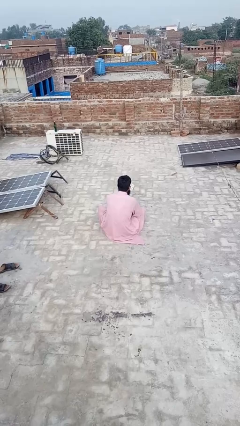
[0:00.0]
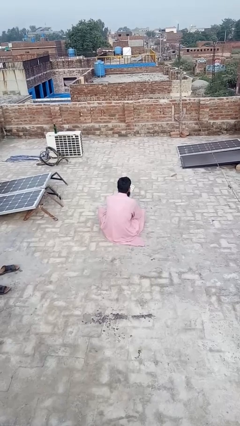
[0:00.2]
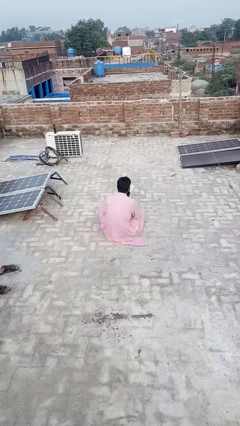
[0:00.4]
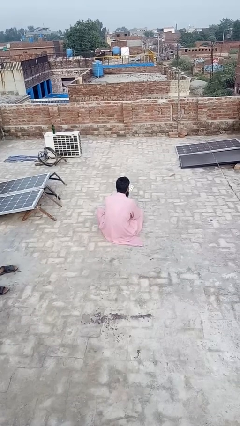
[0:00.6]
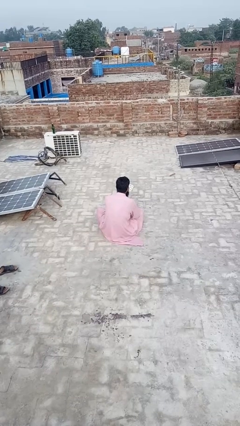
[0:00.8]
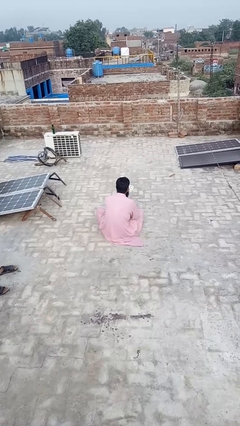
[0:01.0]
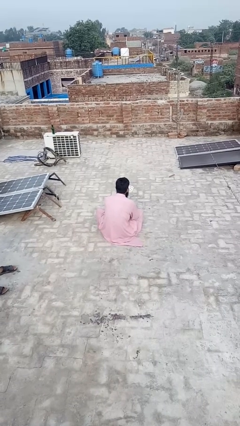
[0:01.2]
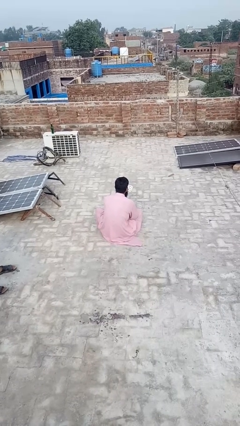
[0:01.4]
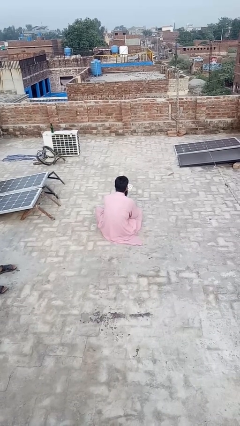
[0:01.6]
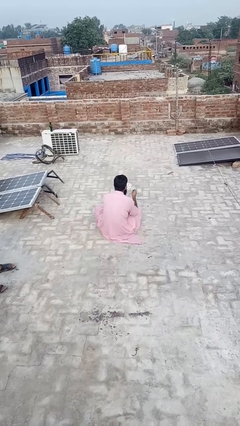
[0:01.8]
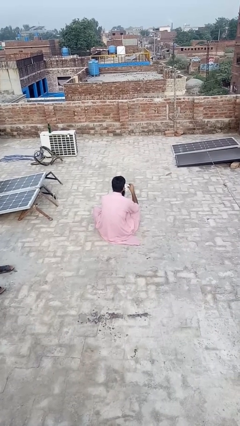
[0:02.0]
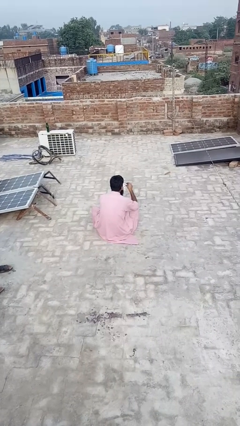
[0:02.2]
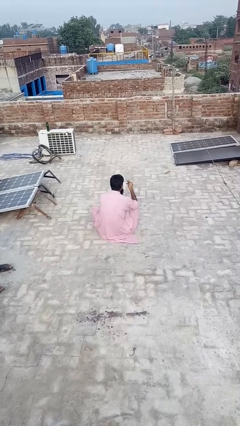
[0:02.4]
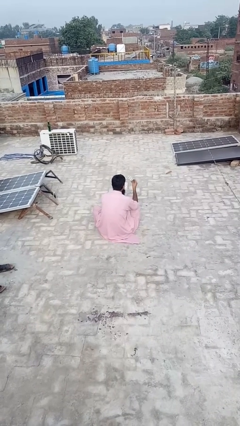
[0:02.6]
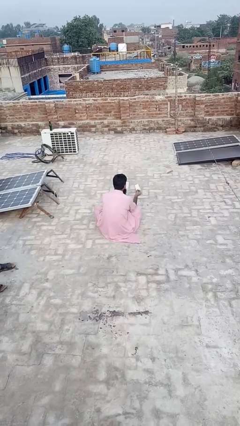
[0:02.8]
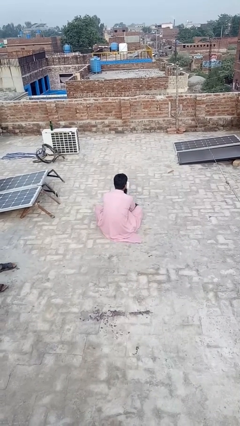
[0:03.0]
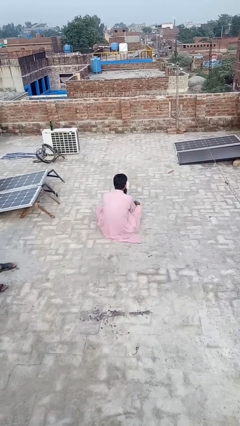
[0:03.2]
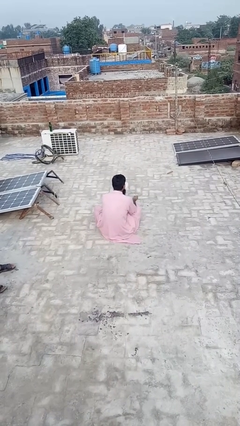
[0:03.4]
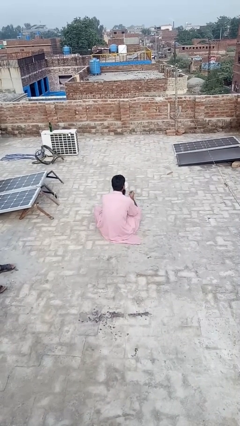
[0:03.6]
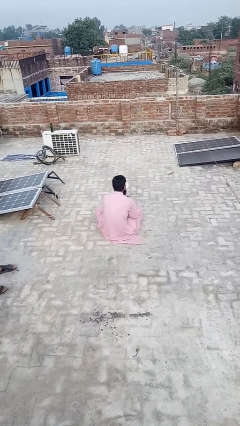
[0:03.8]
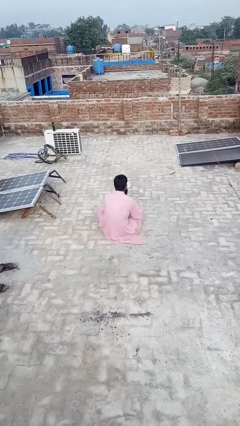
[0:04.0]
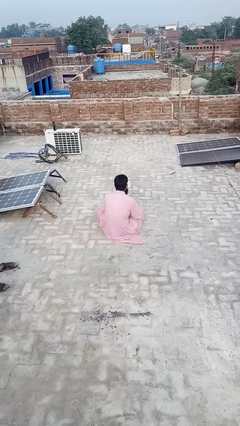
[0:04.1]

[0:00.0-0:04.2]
person discards trash

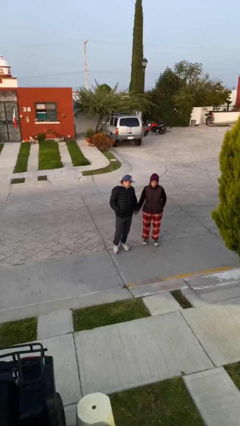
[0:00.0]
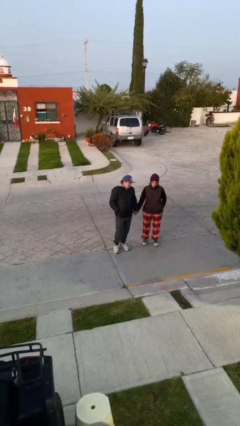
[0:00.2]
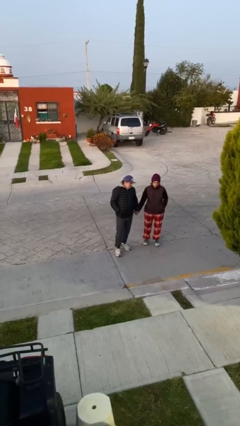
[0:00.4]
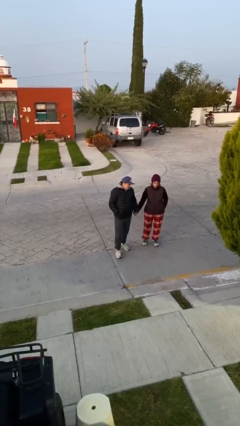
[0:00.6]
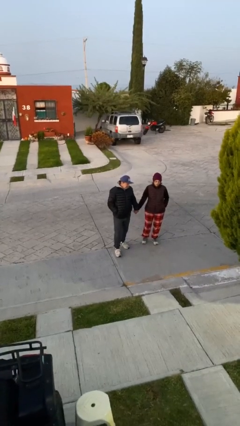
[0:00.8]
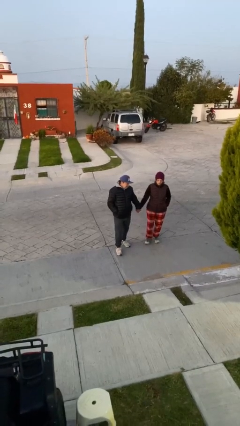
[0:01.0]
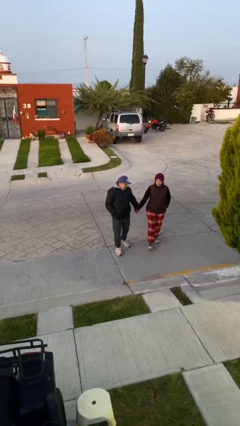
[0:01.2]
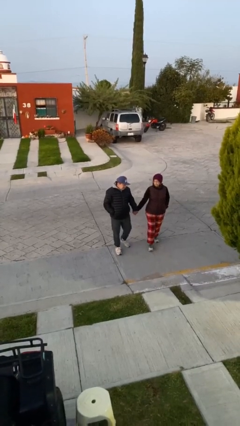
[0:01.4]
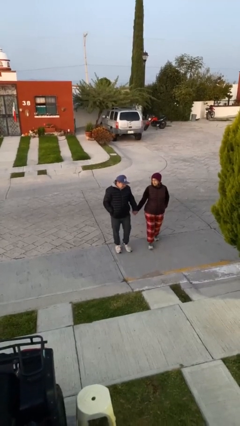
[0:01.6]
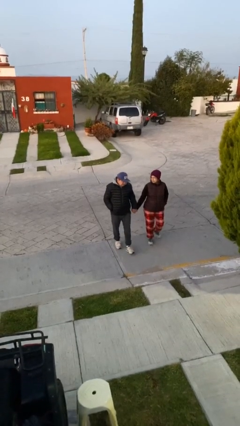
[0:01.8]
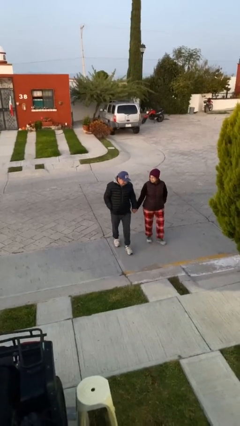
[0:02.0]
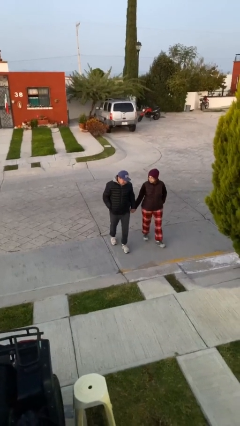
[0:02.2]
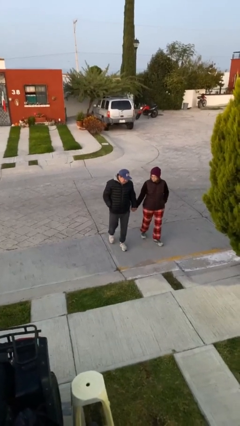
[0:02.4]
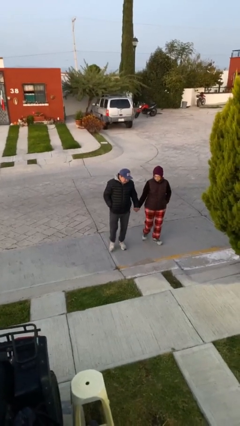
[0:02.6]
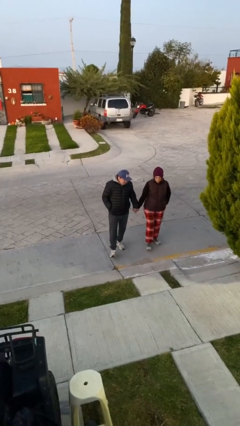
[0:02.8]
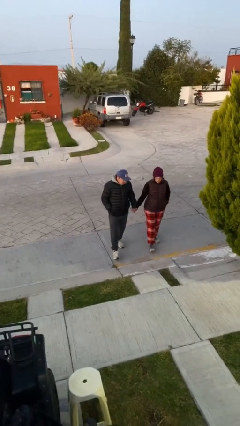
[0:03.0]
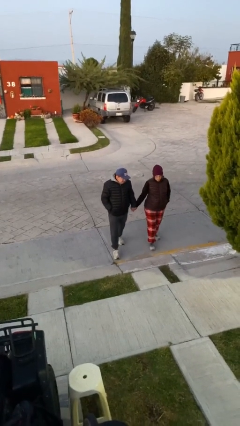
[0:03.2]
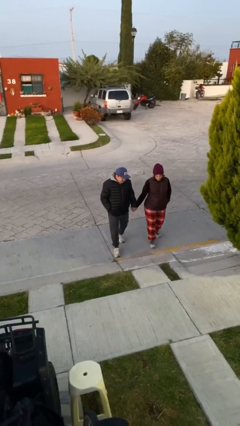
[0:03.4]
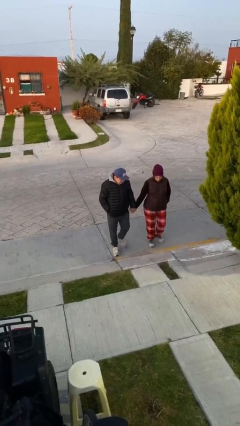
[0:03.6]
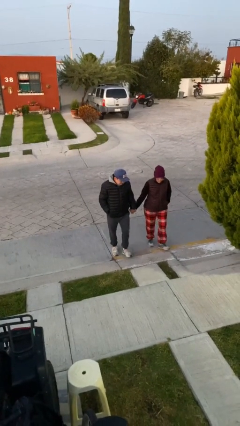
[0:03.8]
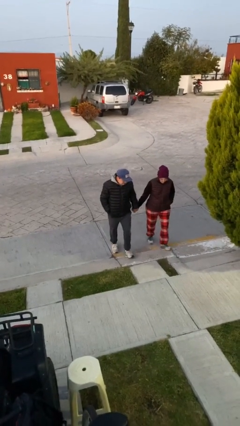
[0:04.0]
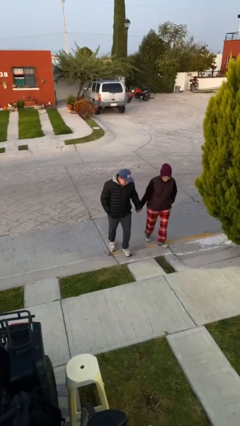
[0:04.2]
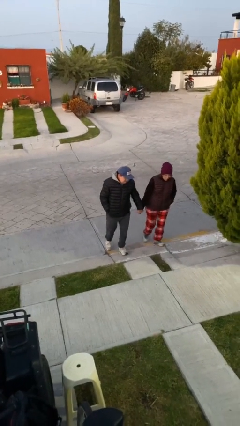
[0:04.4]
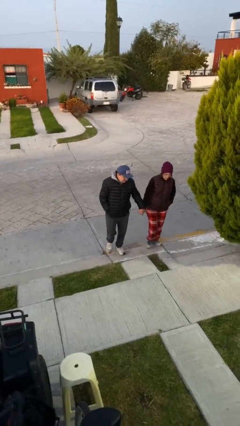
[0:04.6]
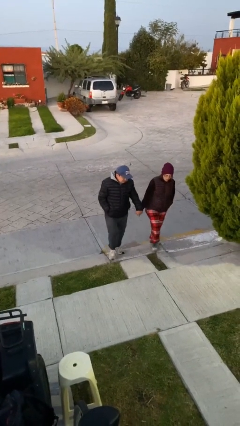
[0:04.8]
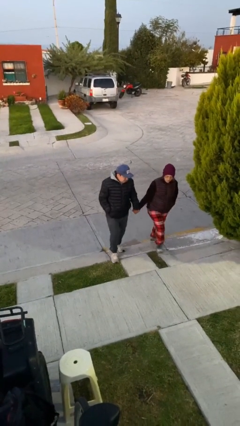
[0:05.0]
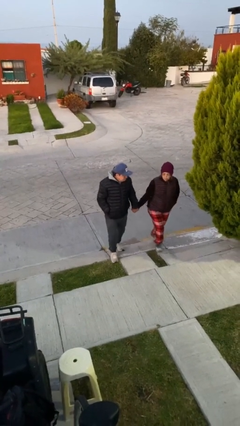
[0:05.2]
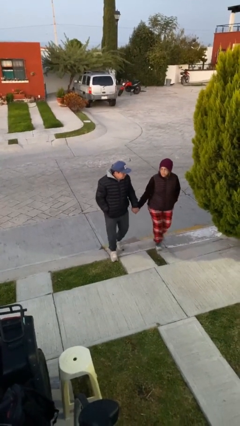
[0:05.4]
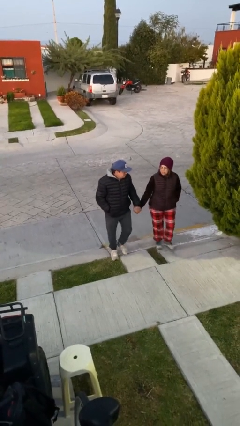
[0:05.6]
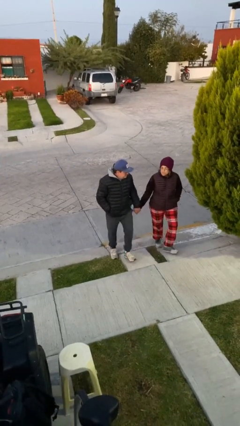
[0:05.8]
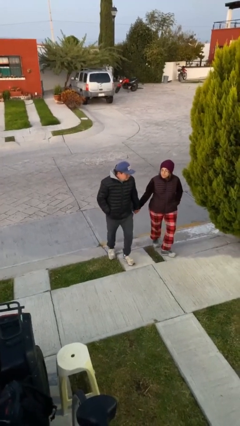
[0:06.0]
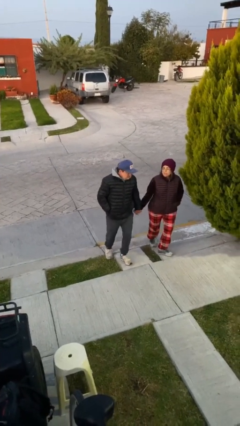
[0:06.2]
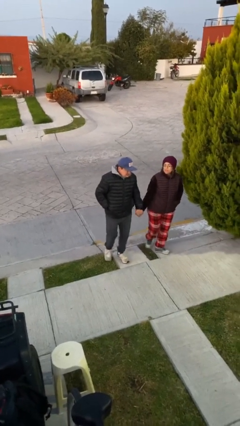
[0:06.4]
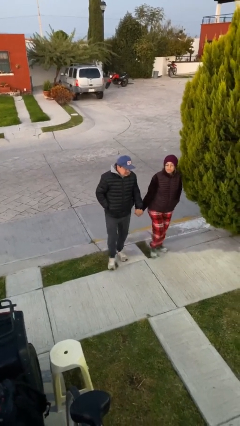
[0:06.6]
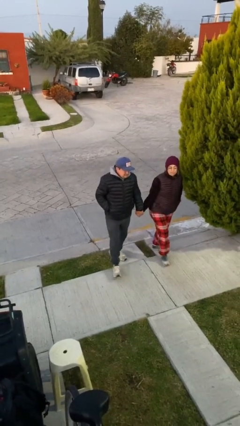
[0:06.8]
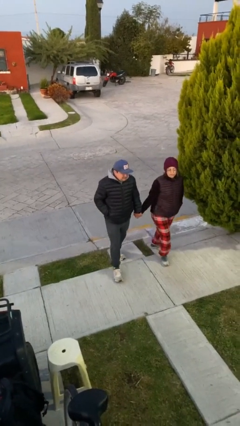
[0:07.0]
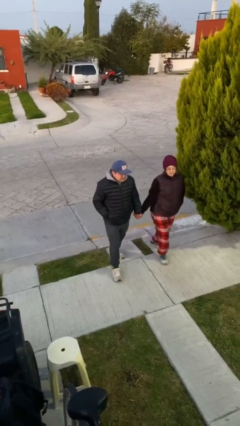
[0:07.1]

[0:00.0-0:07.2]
person holds hand

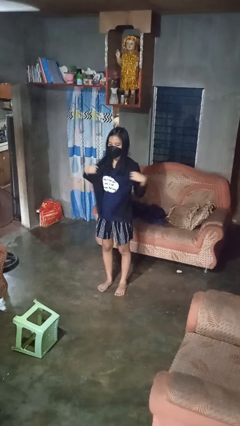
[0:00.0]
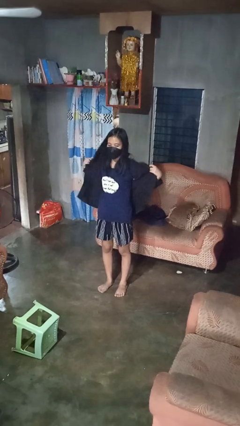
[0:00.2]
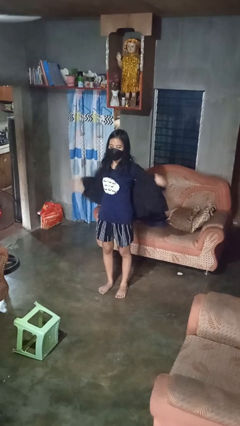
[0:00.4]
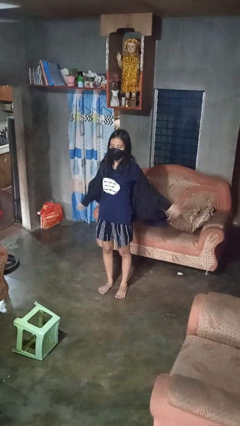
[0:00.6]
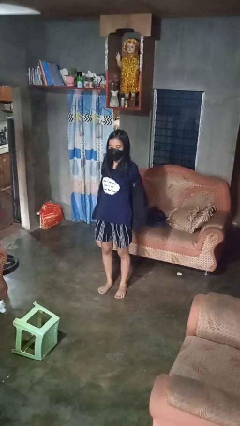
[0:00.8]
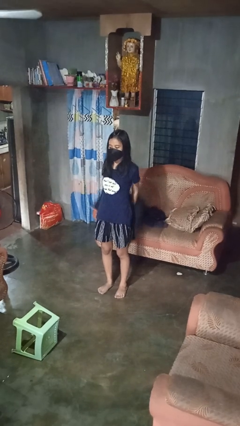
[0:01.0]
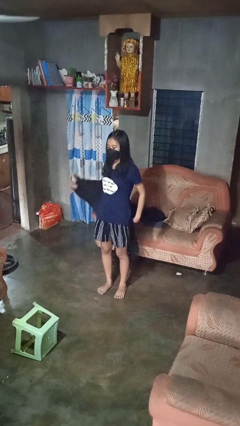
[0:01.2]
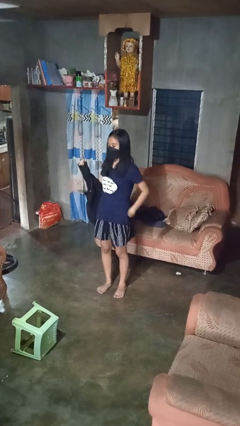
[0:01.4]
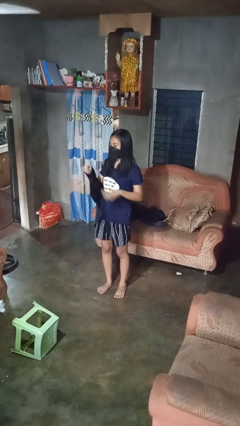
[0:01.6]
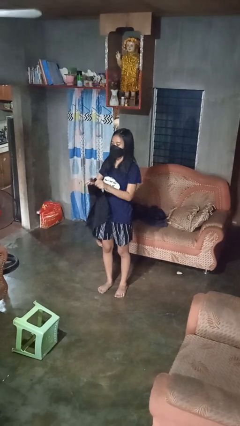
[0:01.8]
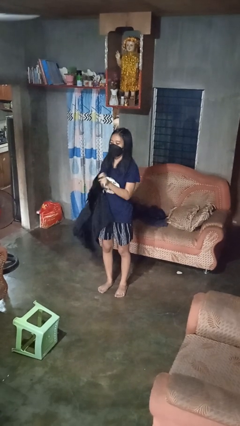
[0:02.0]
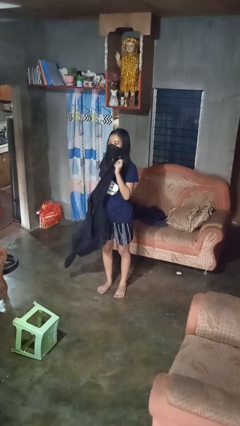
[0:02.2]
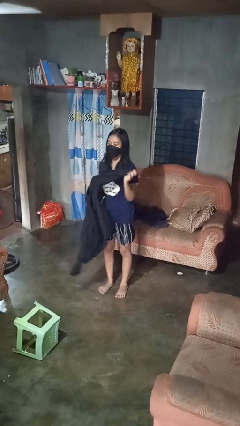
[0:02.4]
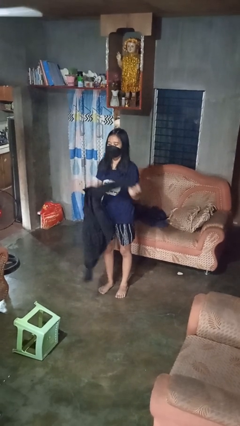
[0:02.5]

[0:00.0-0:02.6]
person takes off shirt

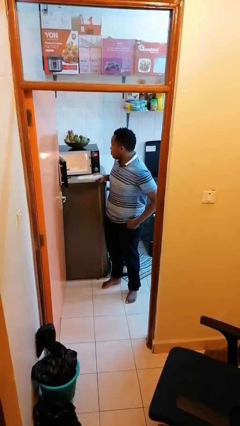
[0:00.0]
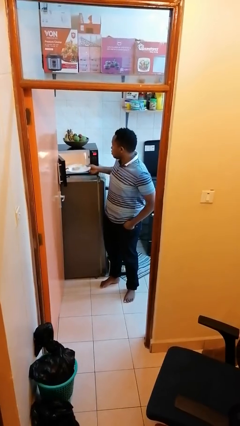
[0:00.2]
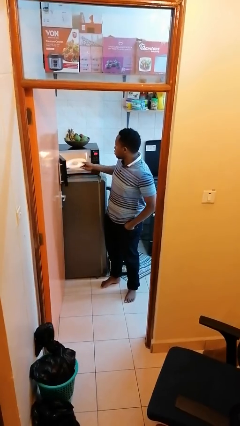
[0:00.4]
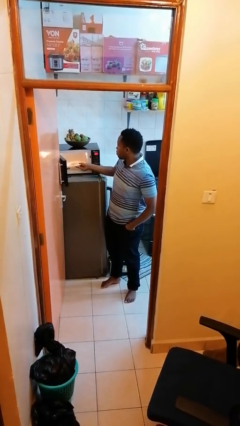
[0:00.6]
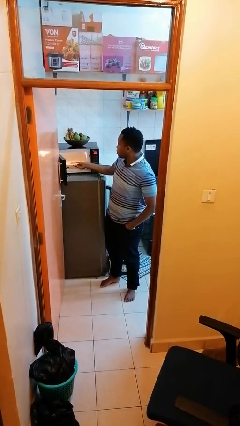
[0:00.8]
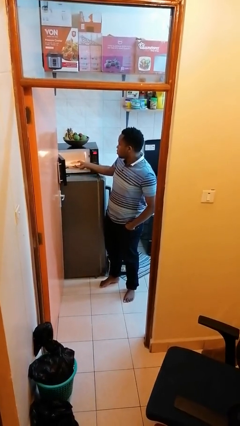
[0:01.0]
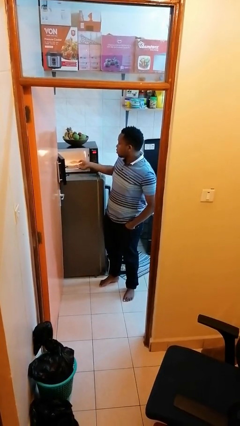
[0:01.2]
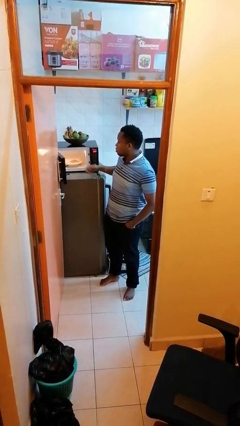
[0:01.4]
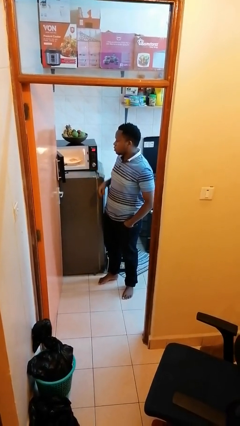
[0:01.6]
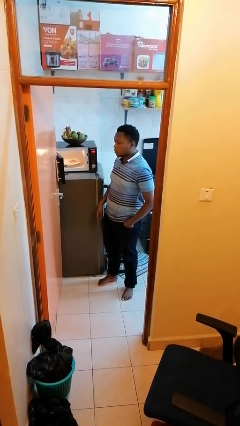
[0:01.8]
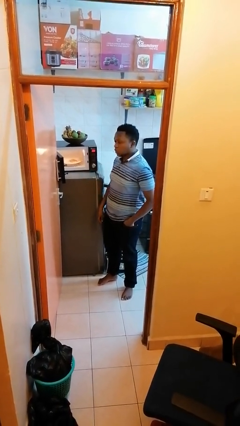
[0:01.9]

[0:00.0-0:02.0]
person puts object into microwave

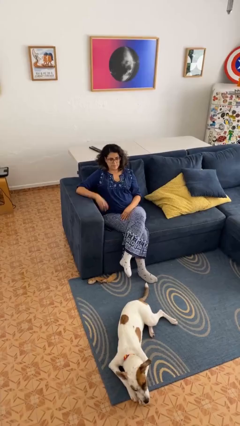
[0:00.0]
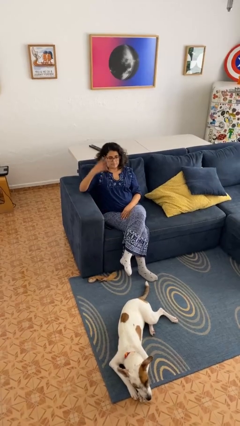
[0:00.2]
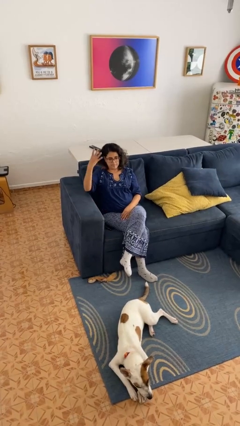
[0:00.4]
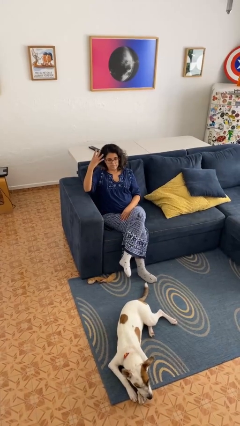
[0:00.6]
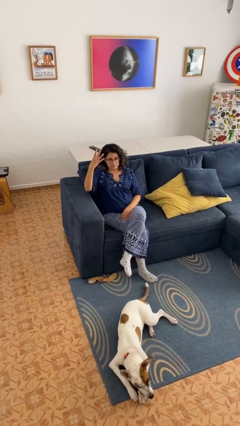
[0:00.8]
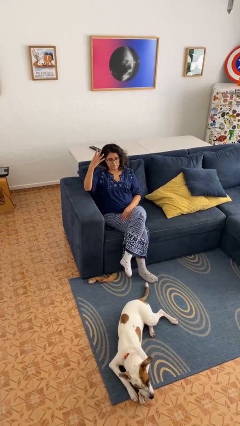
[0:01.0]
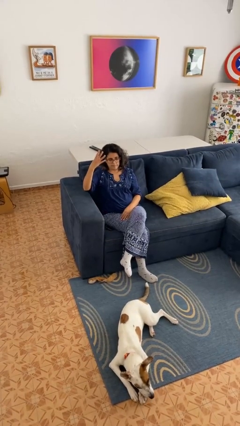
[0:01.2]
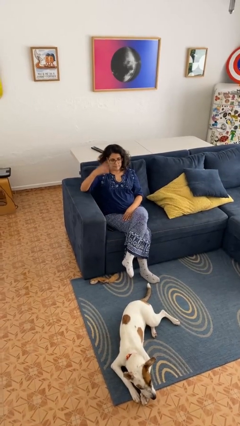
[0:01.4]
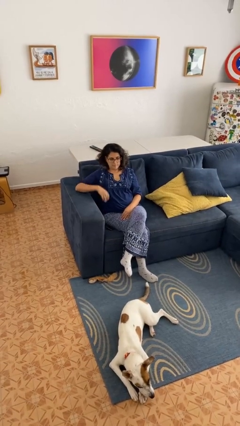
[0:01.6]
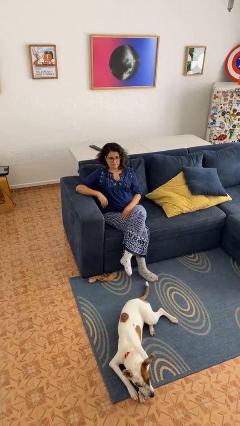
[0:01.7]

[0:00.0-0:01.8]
person gestures number four
